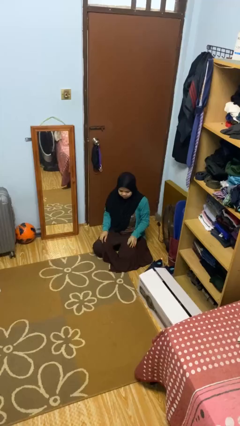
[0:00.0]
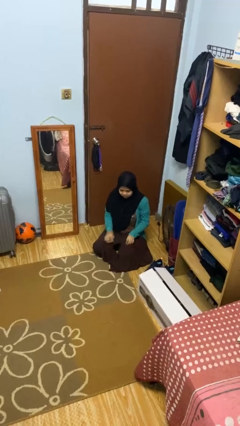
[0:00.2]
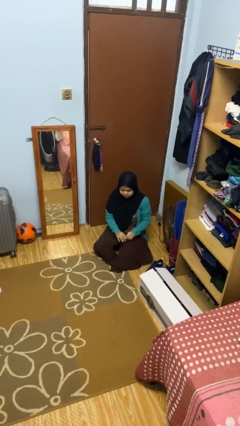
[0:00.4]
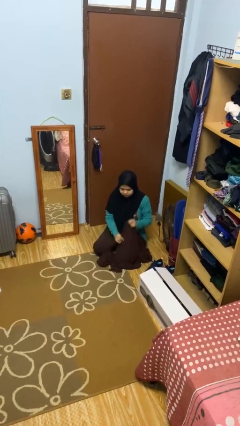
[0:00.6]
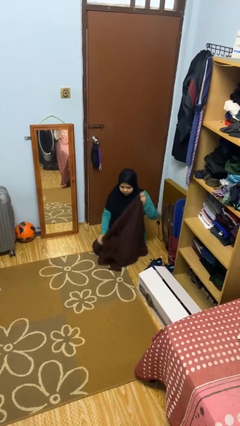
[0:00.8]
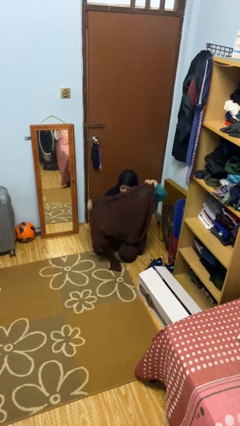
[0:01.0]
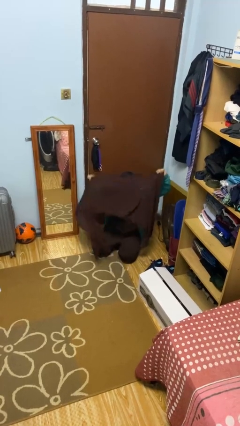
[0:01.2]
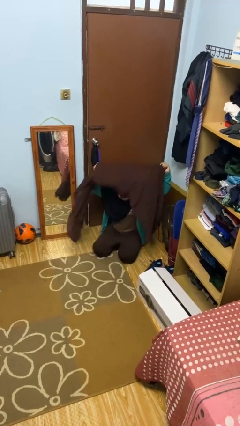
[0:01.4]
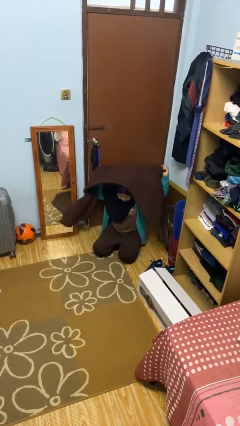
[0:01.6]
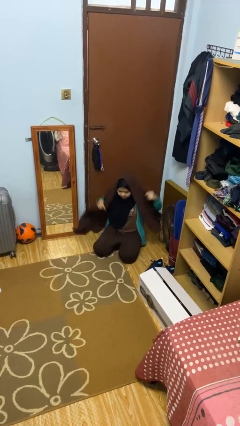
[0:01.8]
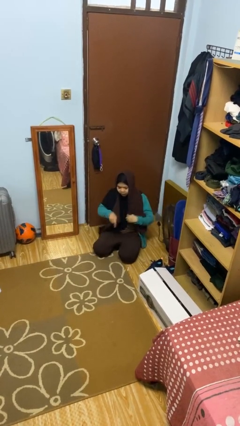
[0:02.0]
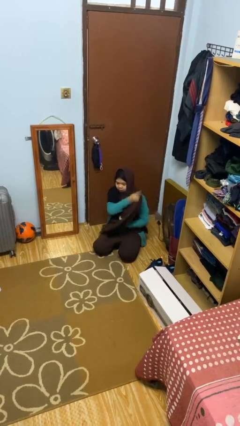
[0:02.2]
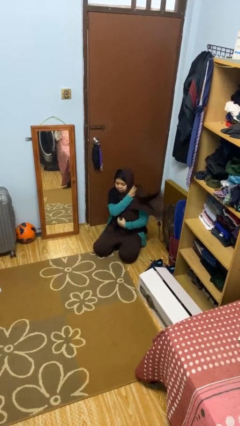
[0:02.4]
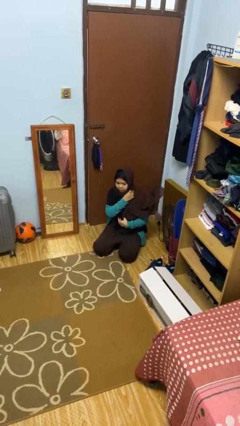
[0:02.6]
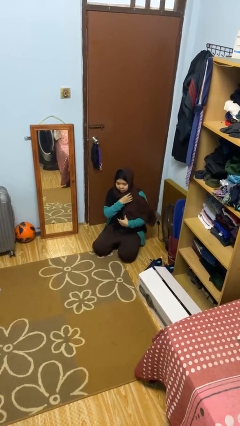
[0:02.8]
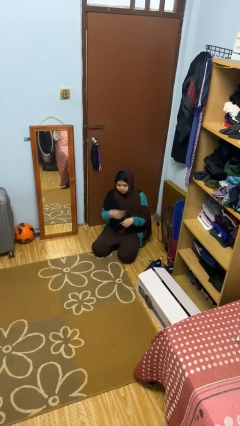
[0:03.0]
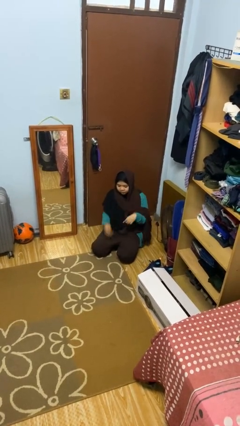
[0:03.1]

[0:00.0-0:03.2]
person puts on scarf

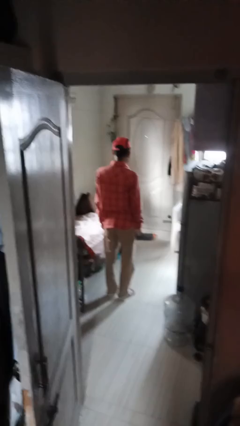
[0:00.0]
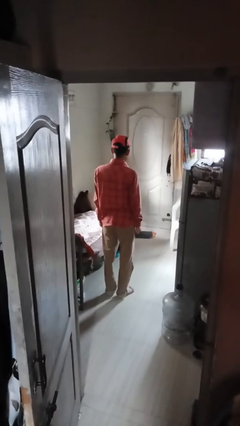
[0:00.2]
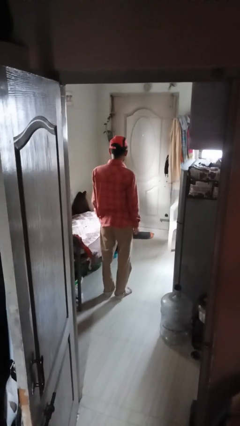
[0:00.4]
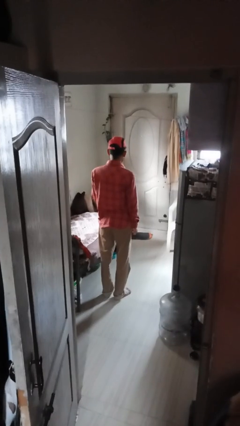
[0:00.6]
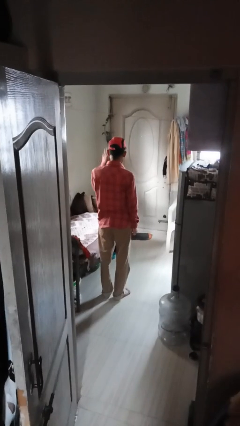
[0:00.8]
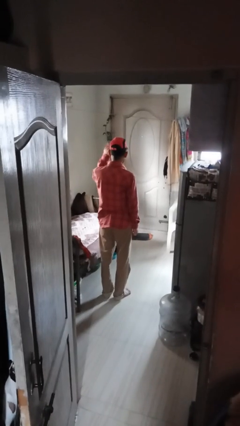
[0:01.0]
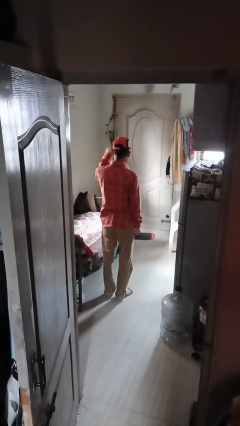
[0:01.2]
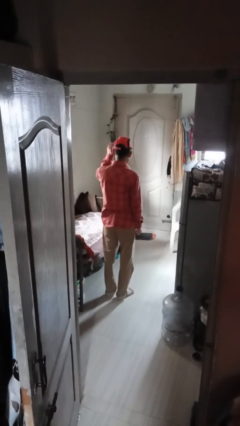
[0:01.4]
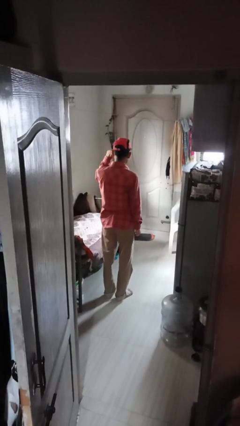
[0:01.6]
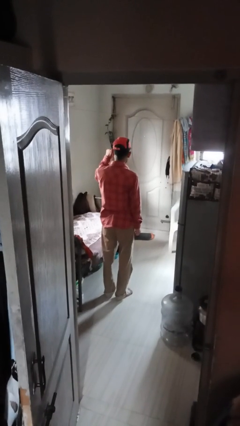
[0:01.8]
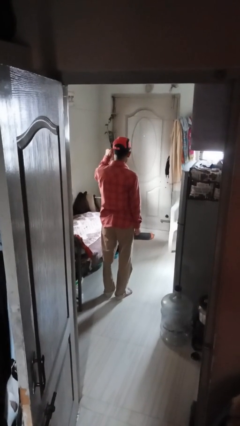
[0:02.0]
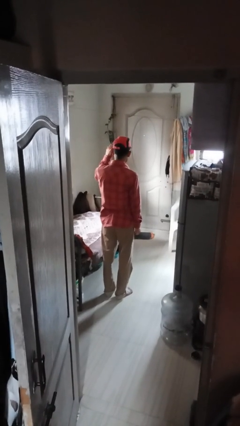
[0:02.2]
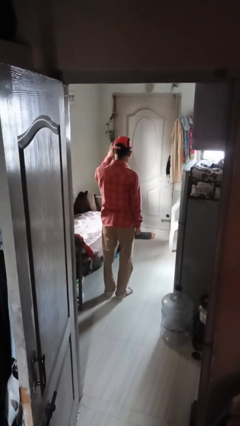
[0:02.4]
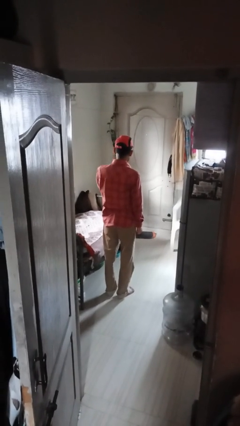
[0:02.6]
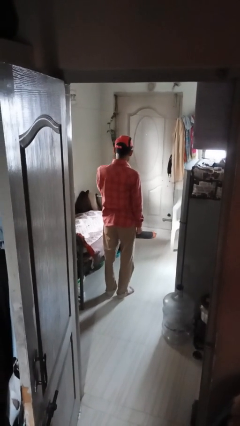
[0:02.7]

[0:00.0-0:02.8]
person gestures come here

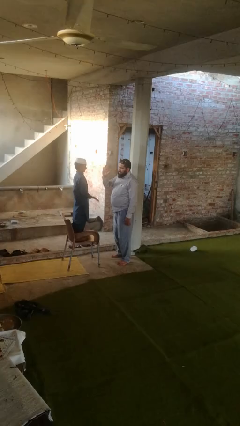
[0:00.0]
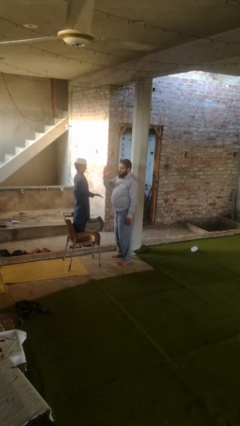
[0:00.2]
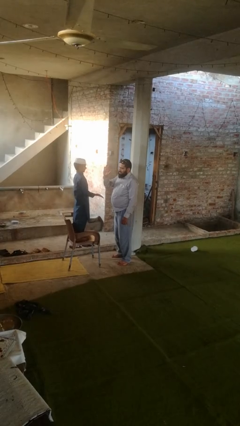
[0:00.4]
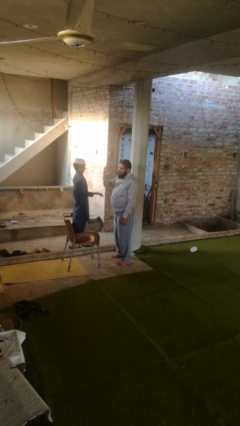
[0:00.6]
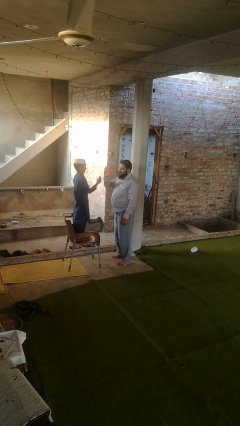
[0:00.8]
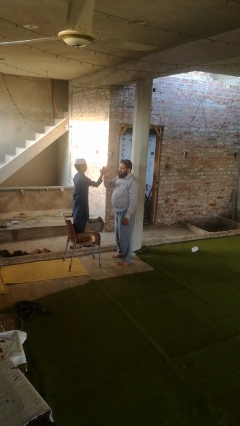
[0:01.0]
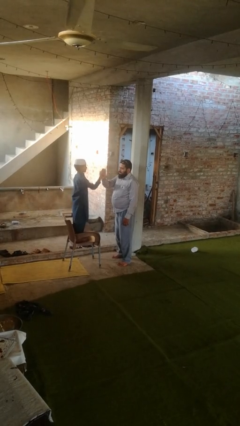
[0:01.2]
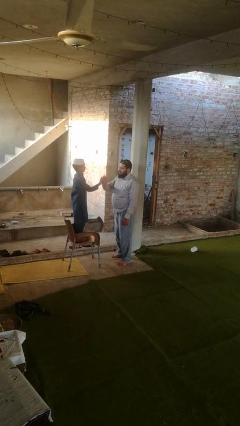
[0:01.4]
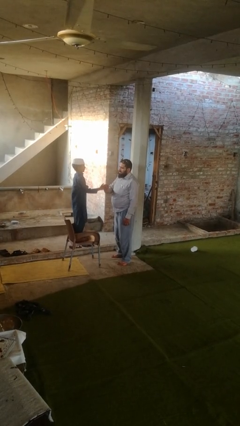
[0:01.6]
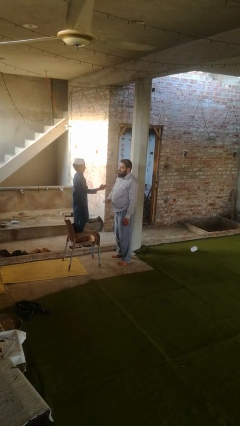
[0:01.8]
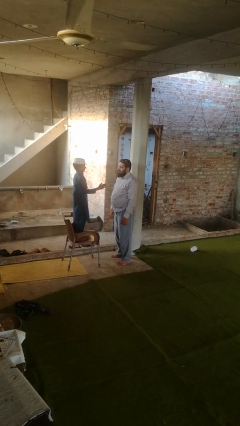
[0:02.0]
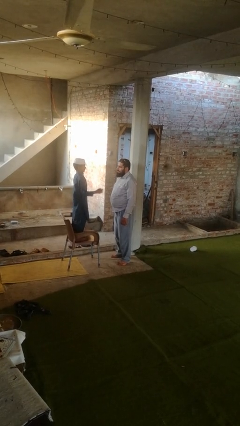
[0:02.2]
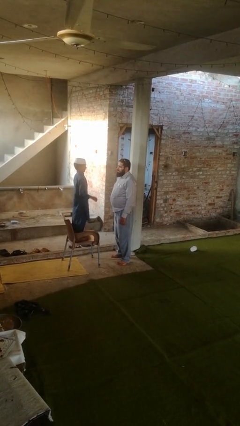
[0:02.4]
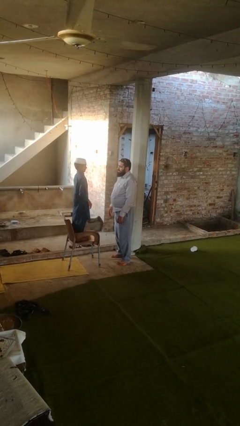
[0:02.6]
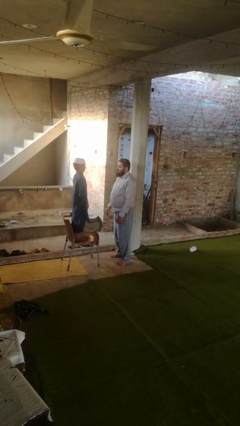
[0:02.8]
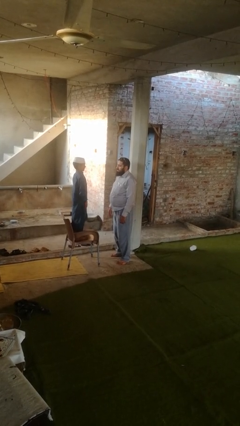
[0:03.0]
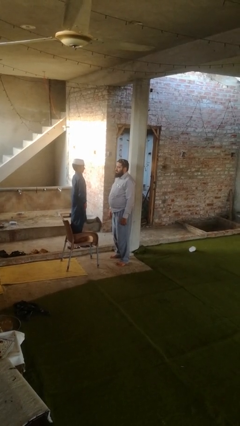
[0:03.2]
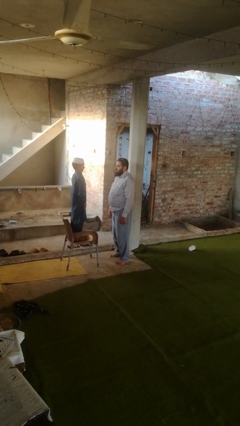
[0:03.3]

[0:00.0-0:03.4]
person highfives hand

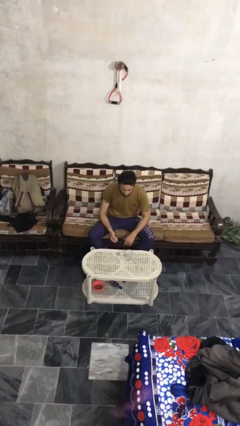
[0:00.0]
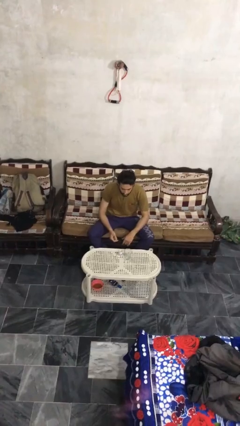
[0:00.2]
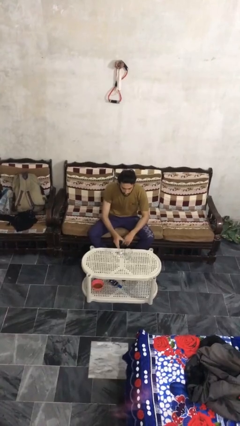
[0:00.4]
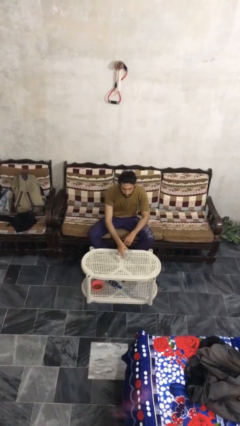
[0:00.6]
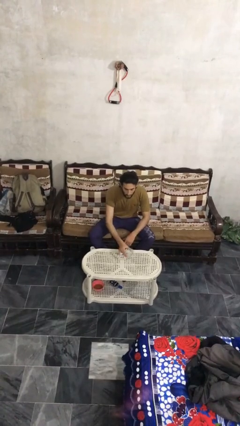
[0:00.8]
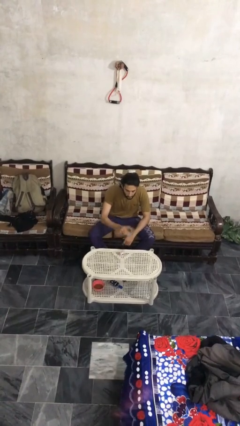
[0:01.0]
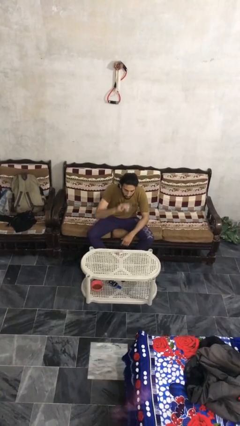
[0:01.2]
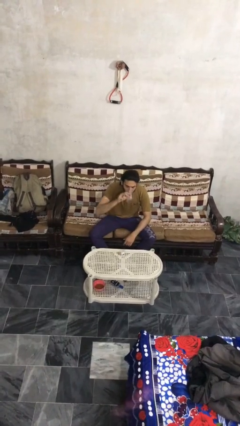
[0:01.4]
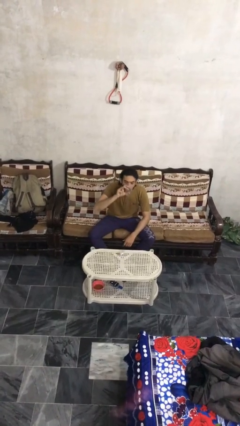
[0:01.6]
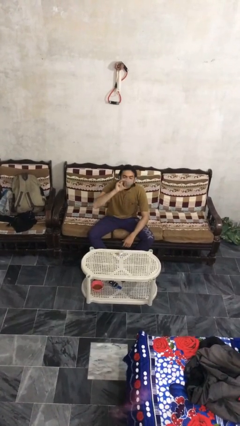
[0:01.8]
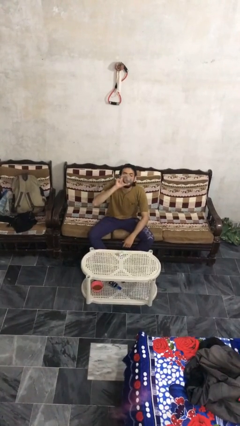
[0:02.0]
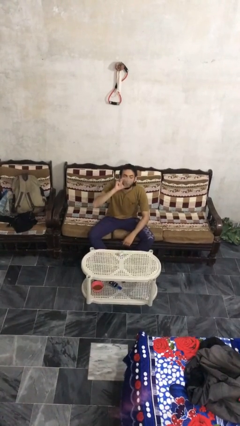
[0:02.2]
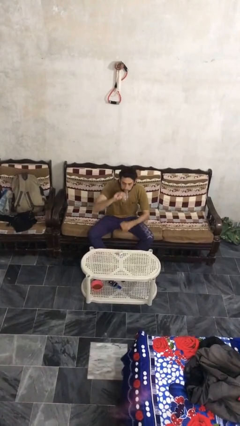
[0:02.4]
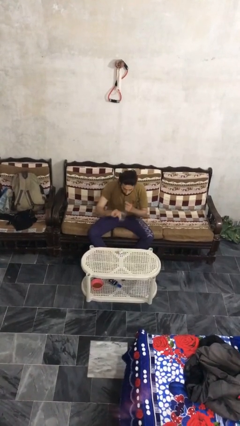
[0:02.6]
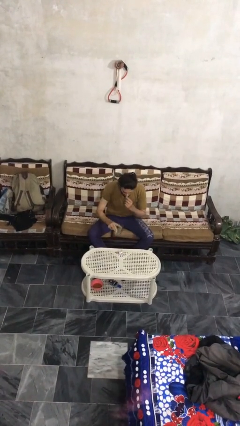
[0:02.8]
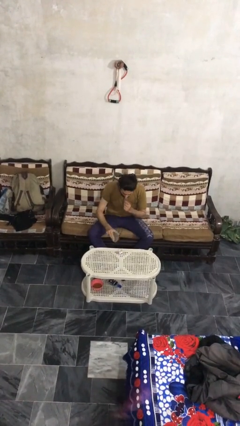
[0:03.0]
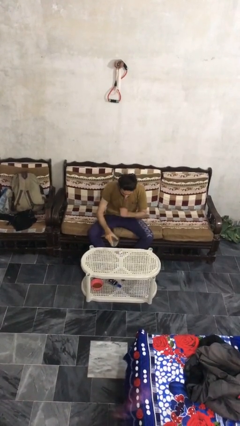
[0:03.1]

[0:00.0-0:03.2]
person drinks from cup

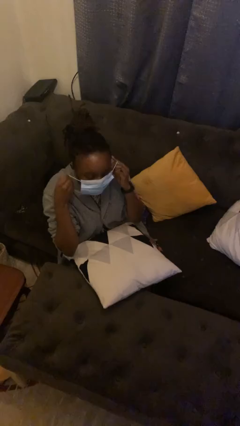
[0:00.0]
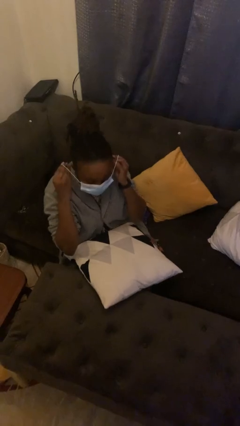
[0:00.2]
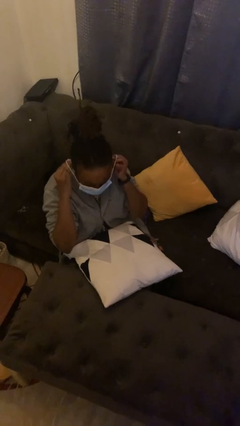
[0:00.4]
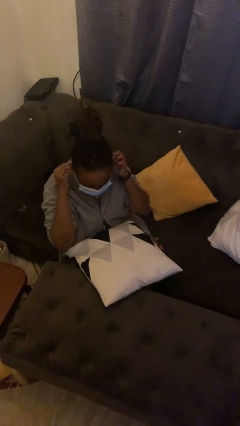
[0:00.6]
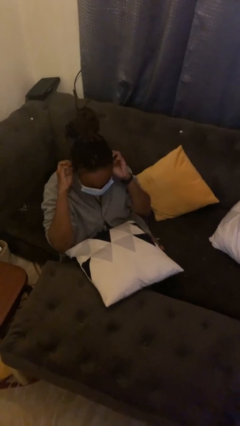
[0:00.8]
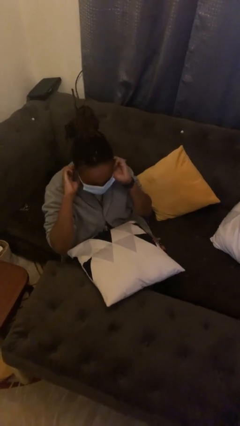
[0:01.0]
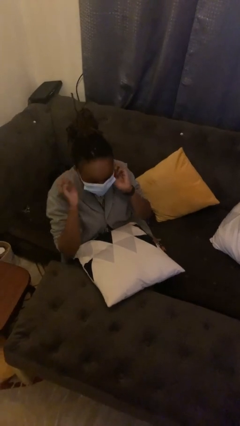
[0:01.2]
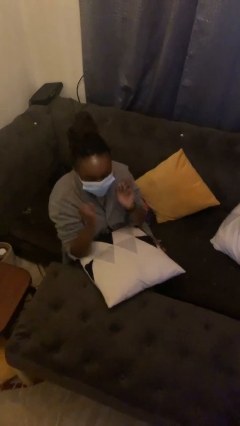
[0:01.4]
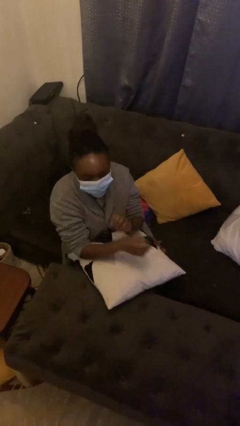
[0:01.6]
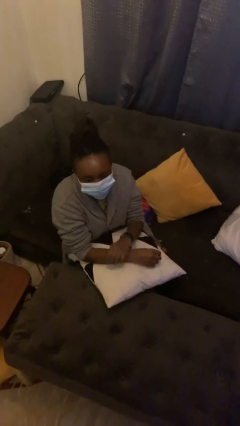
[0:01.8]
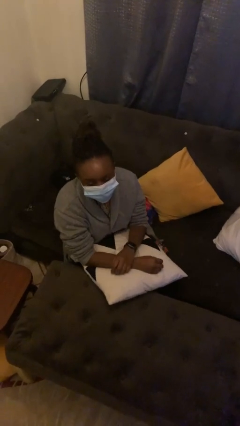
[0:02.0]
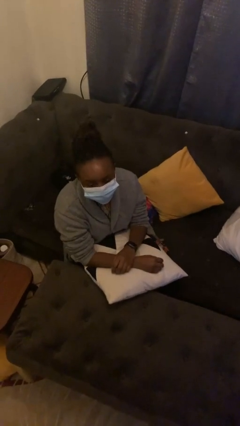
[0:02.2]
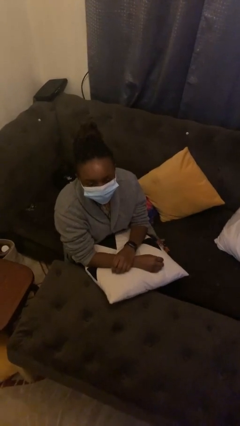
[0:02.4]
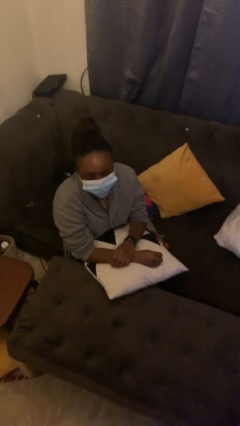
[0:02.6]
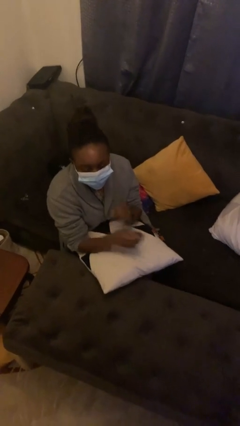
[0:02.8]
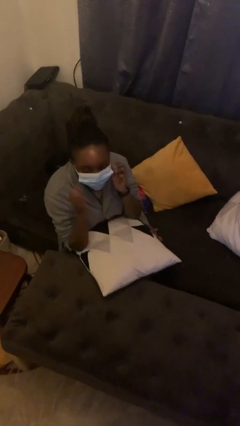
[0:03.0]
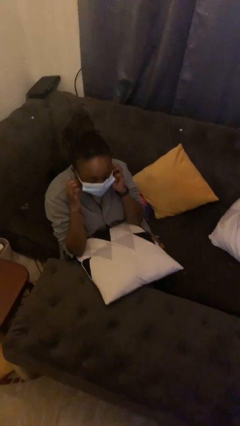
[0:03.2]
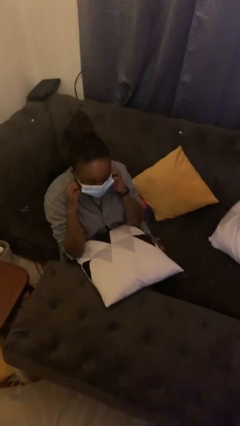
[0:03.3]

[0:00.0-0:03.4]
person puts on facemask

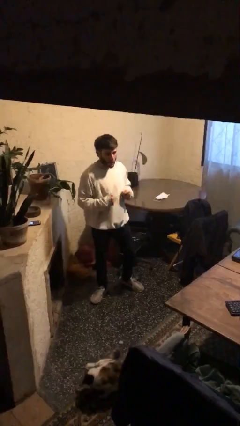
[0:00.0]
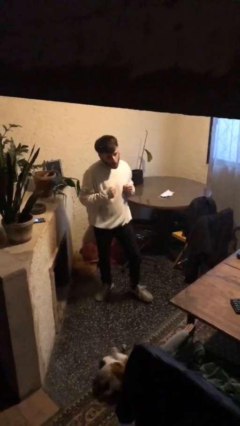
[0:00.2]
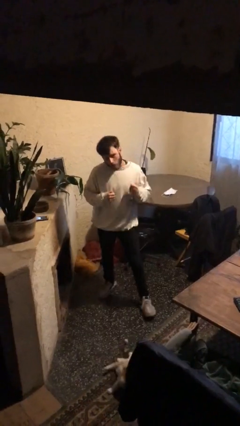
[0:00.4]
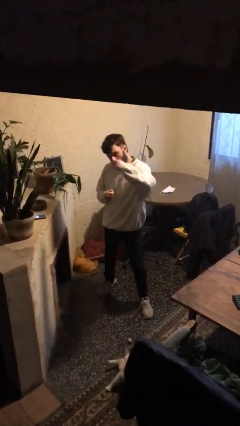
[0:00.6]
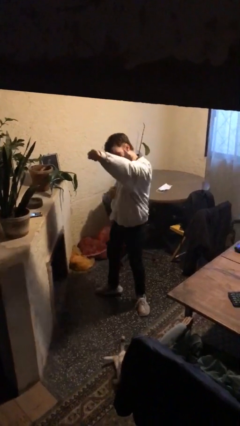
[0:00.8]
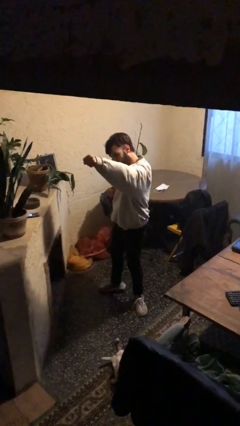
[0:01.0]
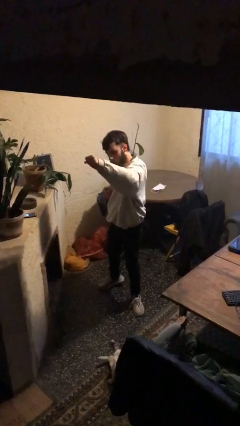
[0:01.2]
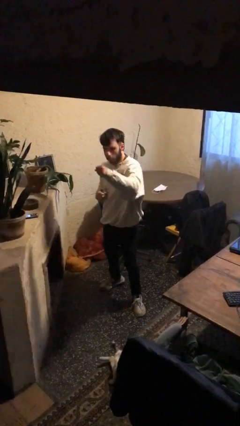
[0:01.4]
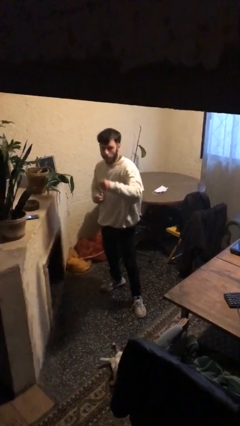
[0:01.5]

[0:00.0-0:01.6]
person punches

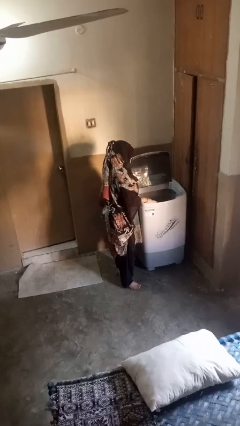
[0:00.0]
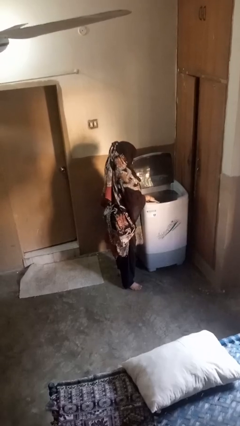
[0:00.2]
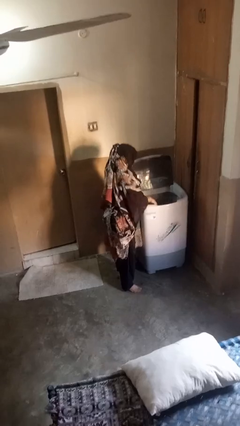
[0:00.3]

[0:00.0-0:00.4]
person unloads clotheswasher
